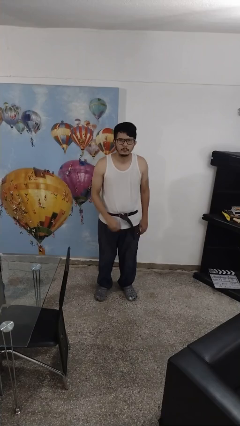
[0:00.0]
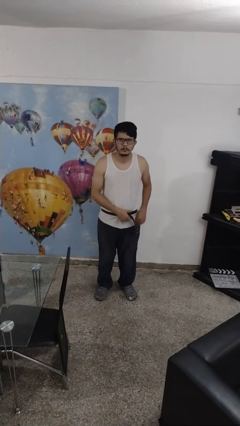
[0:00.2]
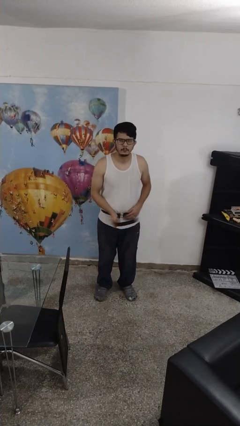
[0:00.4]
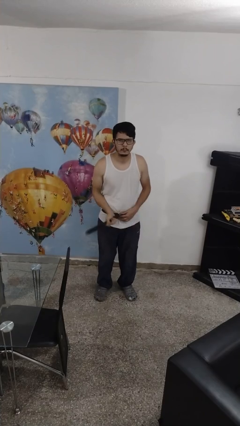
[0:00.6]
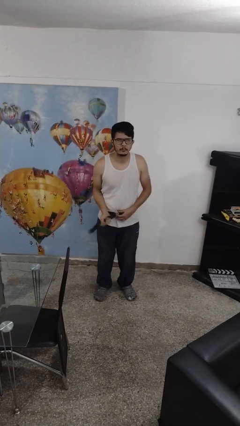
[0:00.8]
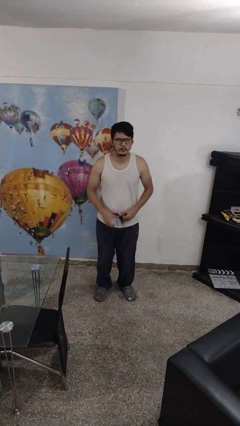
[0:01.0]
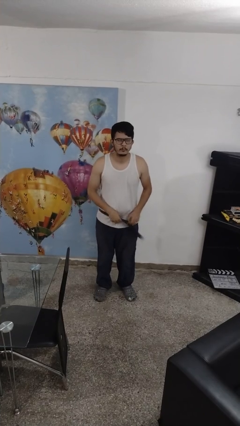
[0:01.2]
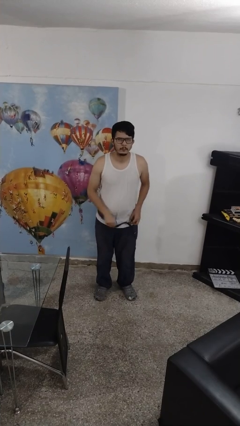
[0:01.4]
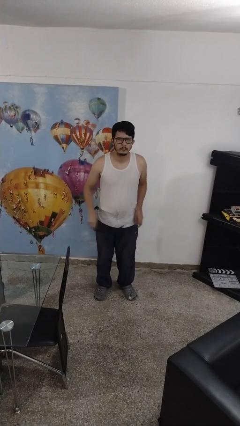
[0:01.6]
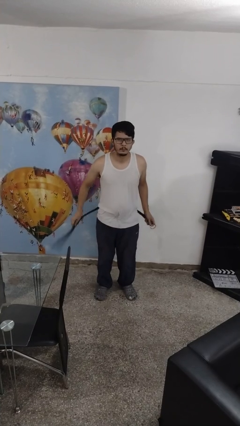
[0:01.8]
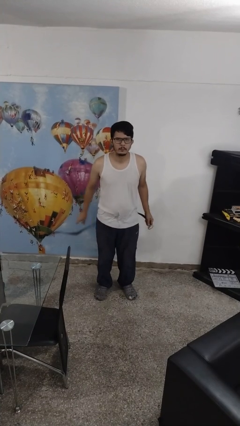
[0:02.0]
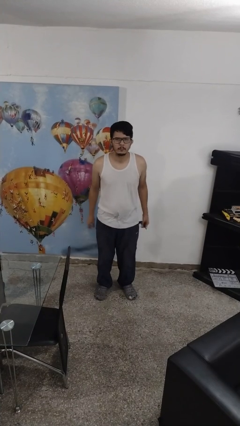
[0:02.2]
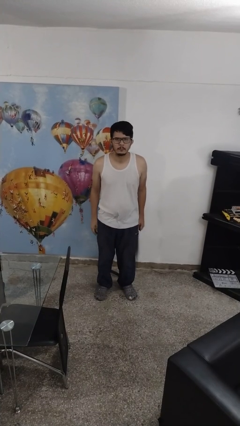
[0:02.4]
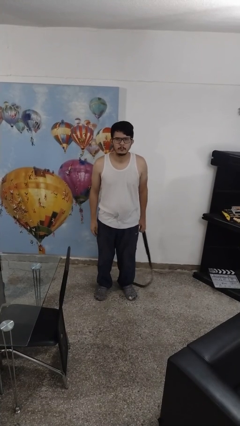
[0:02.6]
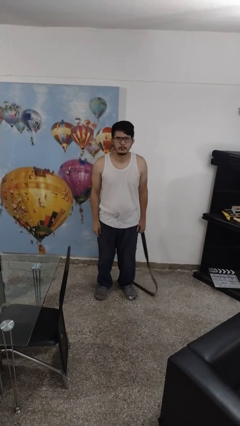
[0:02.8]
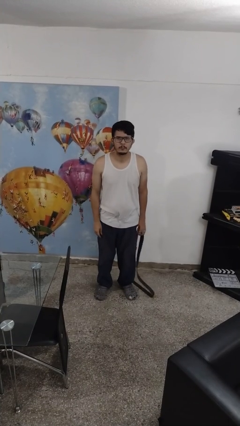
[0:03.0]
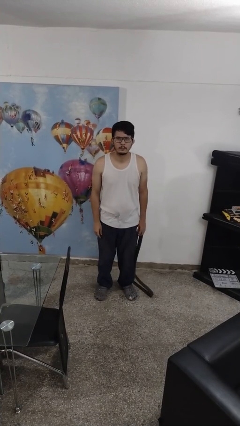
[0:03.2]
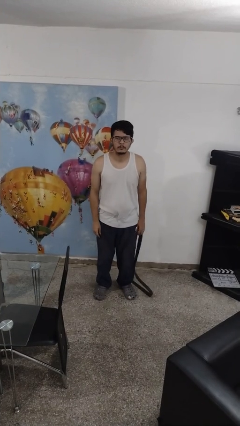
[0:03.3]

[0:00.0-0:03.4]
person takes off belt

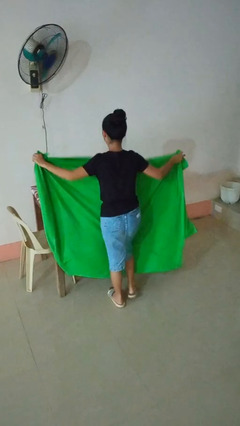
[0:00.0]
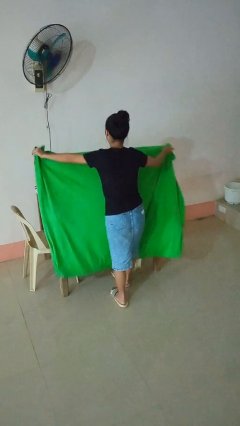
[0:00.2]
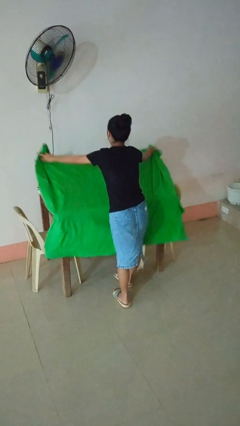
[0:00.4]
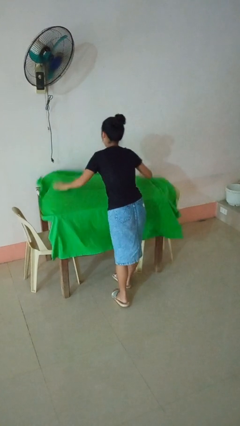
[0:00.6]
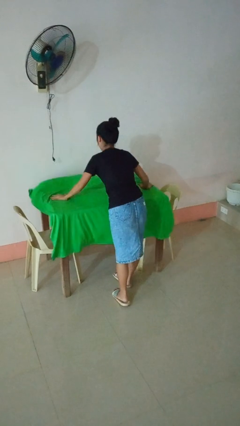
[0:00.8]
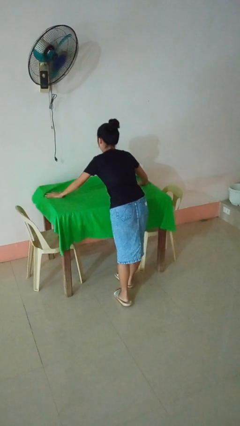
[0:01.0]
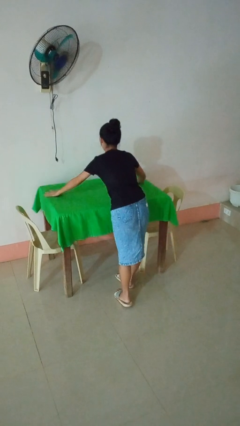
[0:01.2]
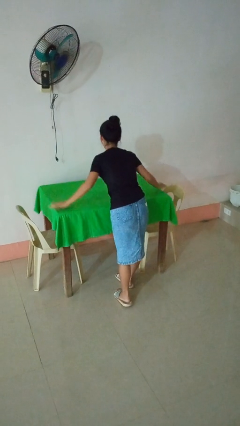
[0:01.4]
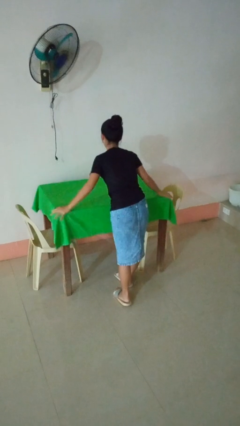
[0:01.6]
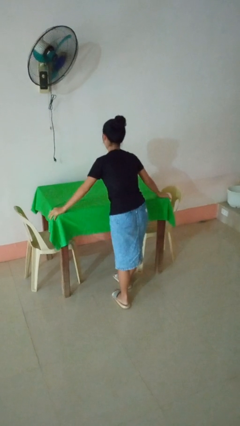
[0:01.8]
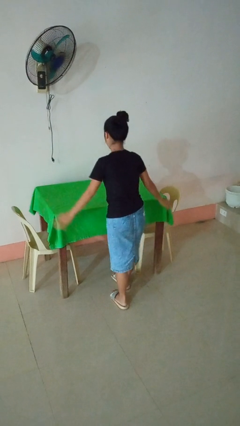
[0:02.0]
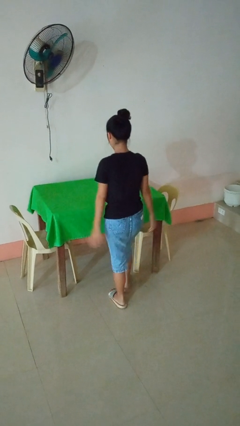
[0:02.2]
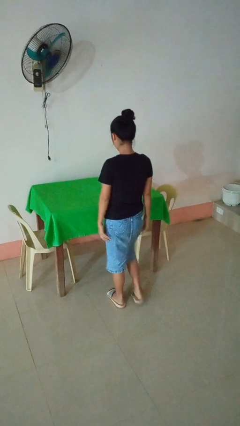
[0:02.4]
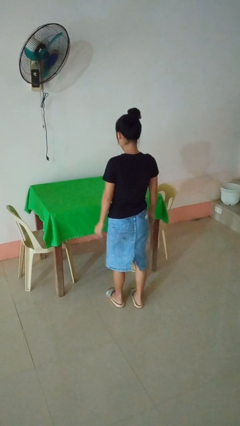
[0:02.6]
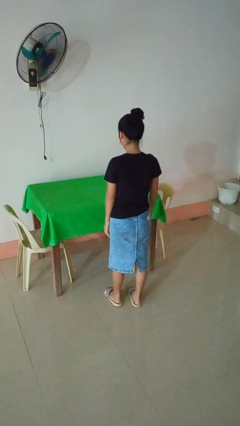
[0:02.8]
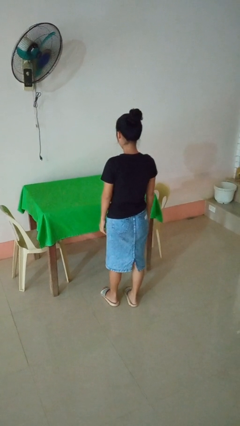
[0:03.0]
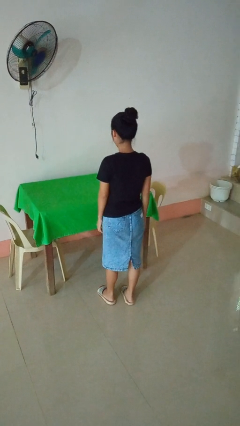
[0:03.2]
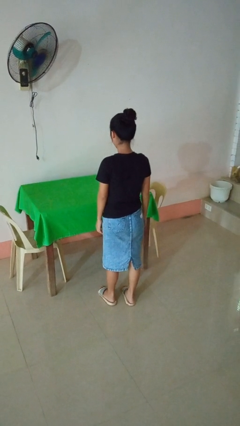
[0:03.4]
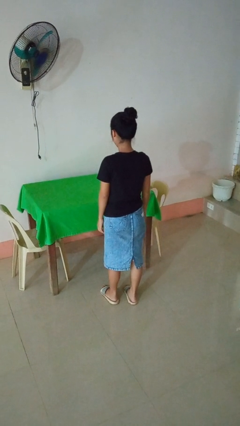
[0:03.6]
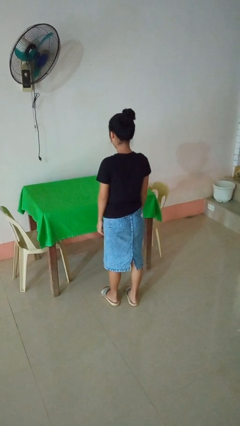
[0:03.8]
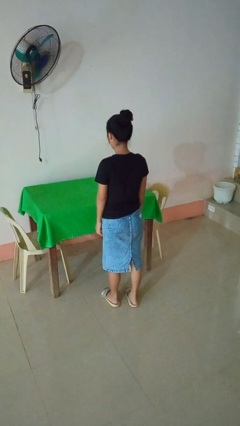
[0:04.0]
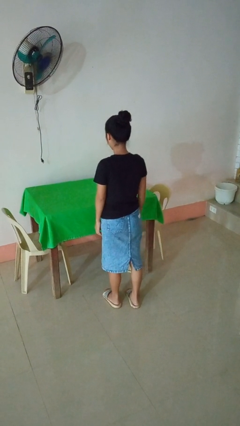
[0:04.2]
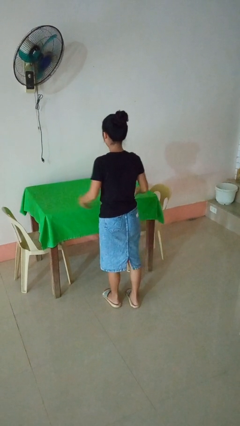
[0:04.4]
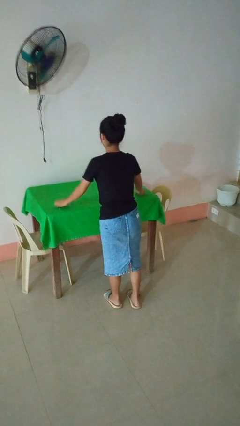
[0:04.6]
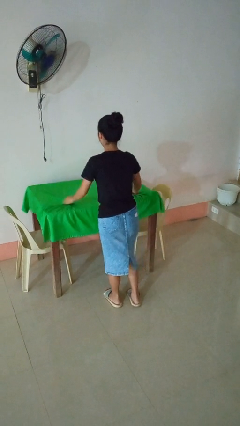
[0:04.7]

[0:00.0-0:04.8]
person spreads tablecloth

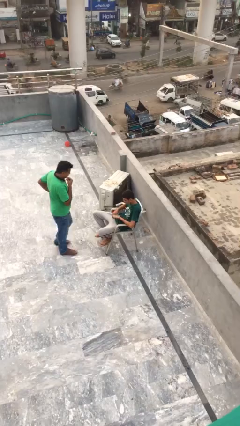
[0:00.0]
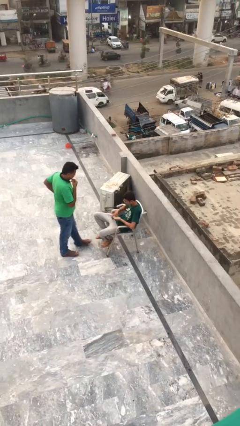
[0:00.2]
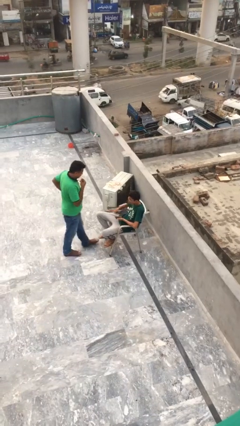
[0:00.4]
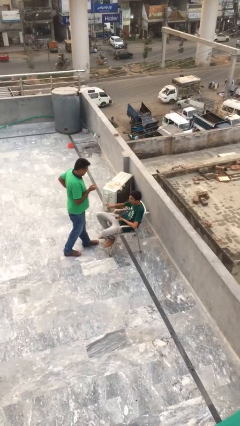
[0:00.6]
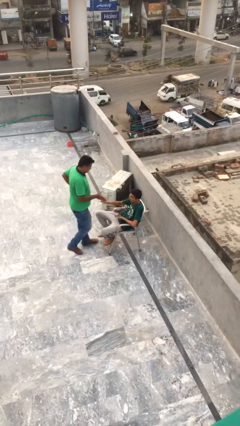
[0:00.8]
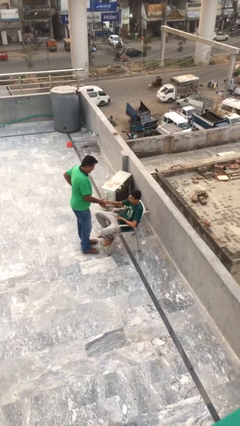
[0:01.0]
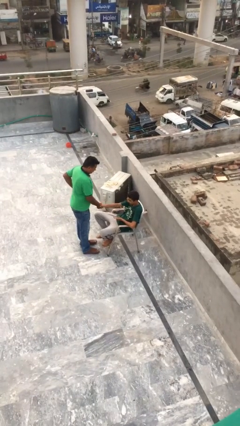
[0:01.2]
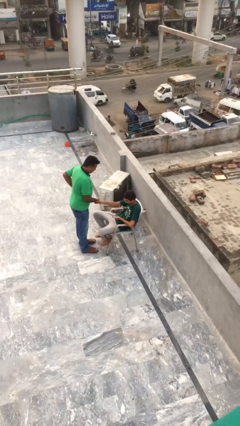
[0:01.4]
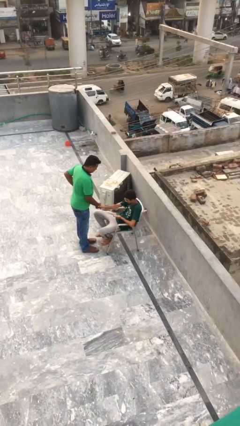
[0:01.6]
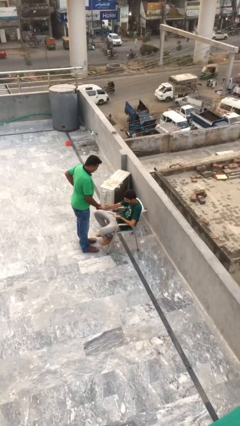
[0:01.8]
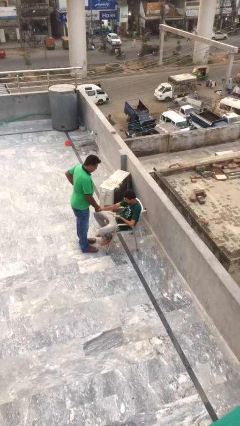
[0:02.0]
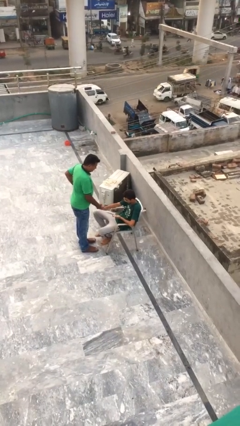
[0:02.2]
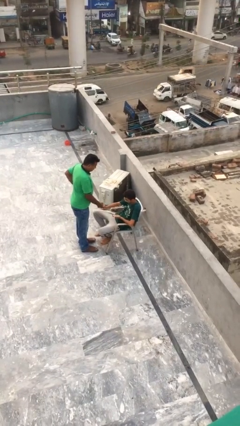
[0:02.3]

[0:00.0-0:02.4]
person shakes hand

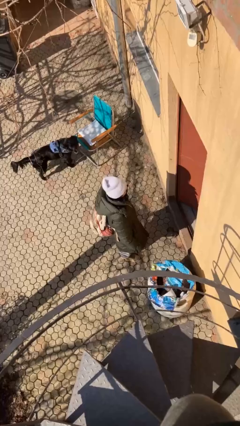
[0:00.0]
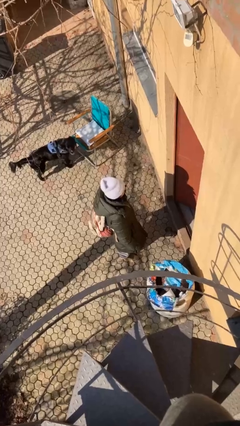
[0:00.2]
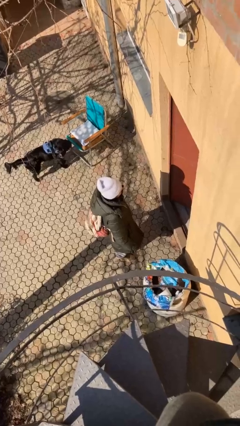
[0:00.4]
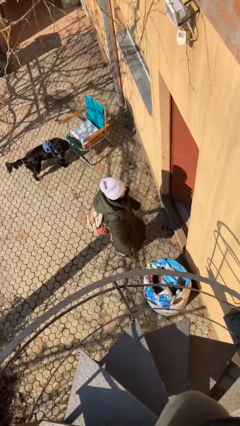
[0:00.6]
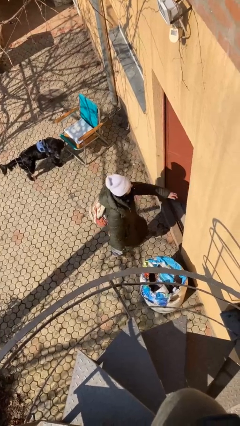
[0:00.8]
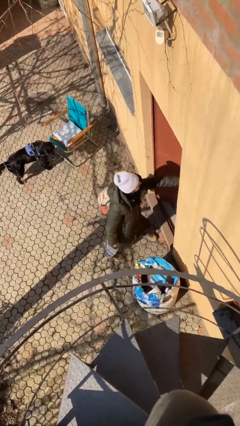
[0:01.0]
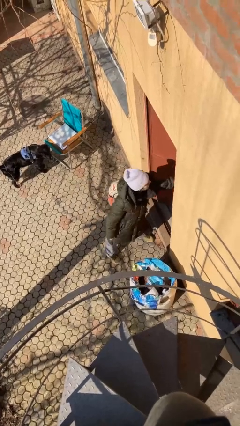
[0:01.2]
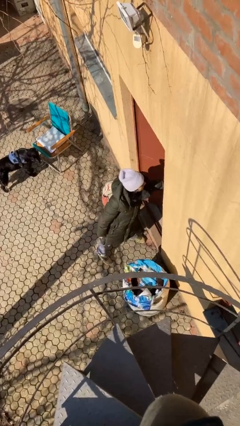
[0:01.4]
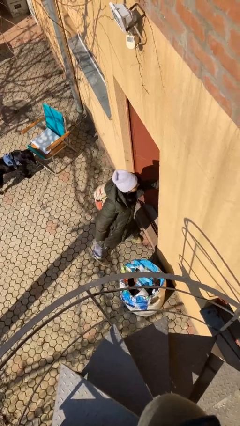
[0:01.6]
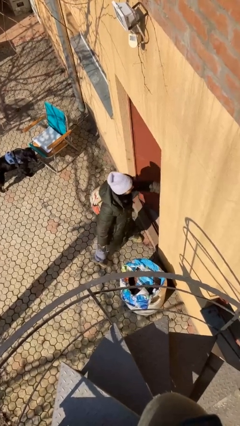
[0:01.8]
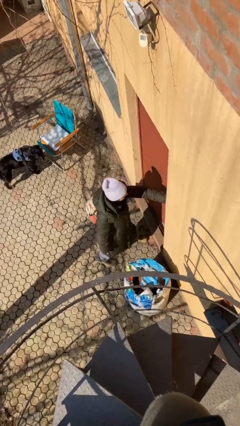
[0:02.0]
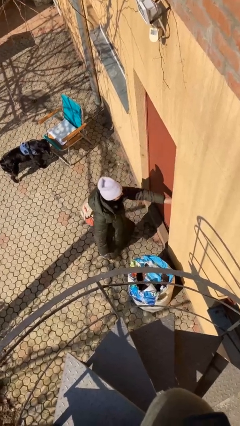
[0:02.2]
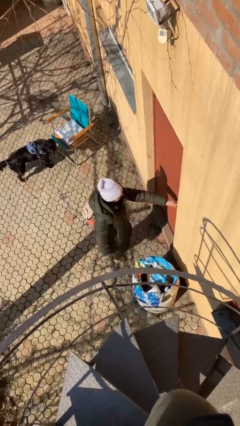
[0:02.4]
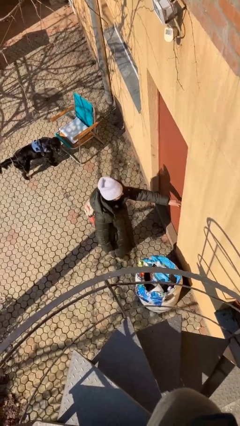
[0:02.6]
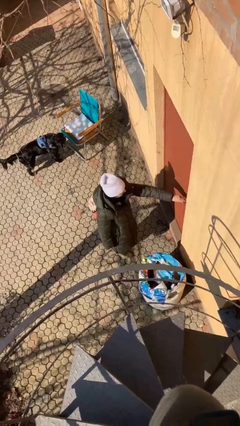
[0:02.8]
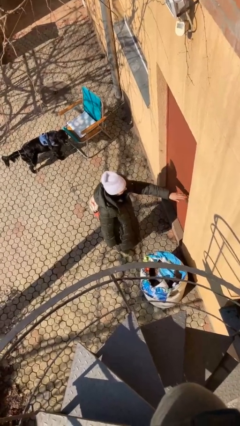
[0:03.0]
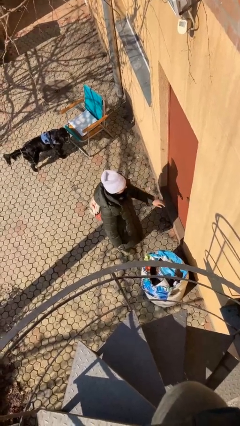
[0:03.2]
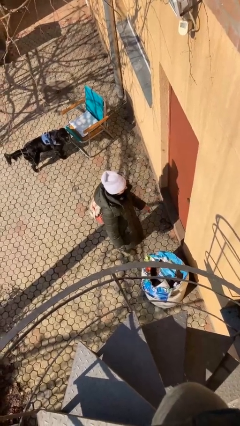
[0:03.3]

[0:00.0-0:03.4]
person closes facility door

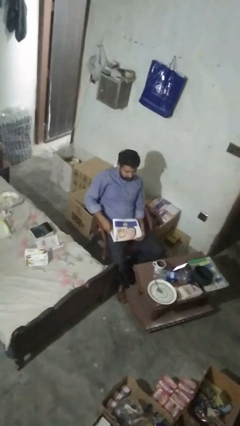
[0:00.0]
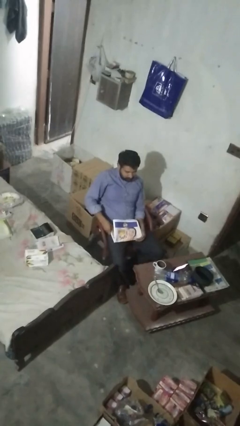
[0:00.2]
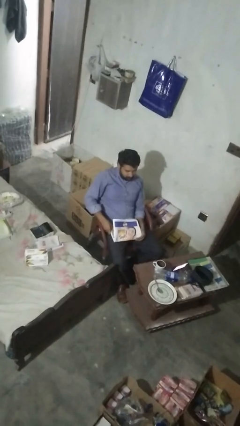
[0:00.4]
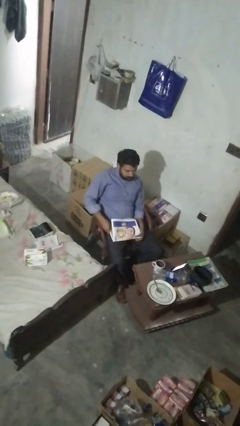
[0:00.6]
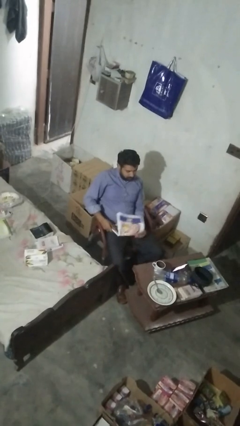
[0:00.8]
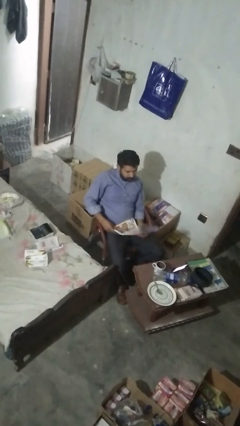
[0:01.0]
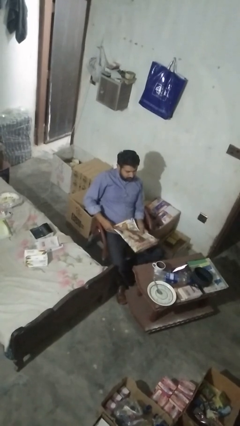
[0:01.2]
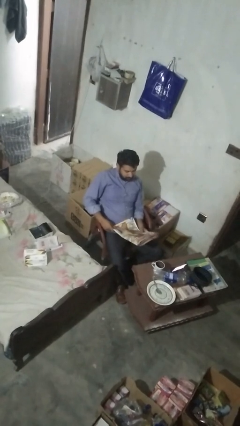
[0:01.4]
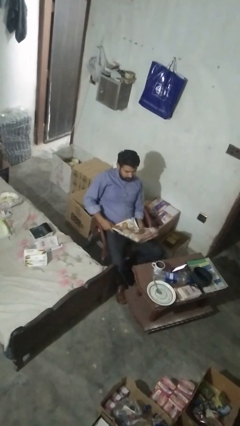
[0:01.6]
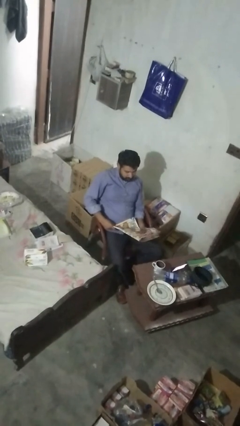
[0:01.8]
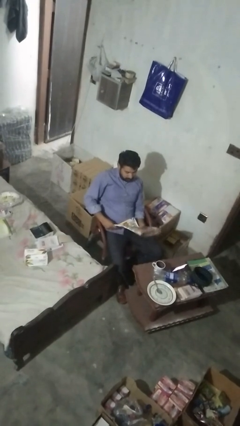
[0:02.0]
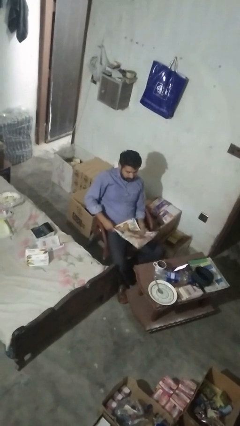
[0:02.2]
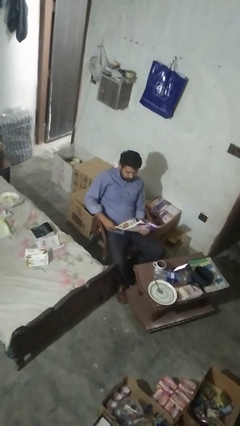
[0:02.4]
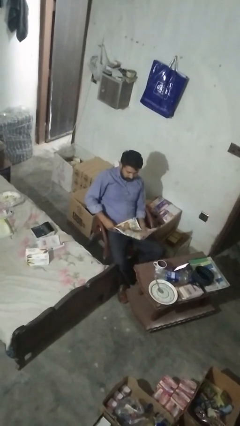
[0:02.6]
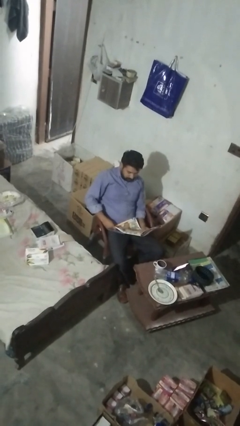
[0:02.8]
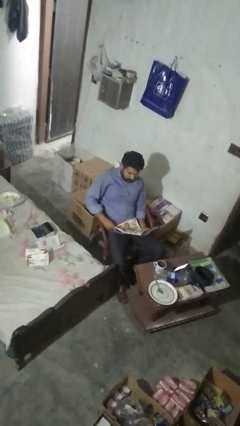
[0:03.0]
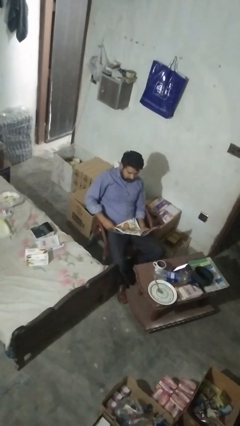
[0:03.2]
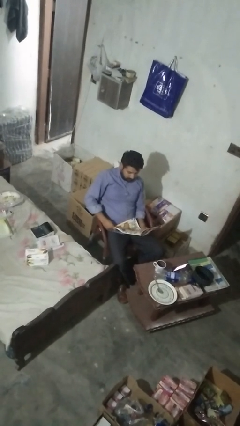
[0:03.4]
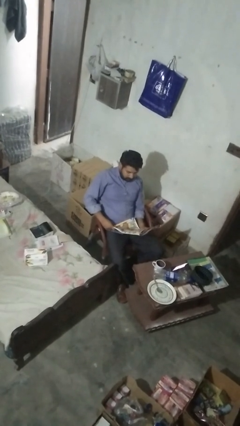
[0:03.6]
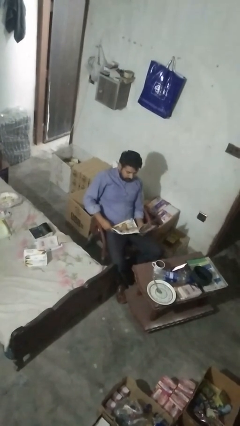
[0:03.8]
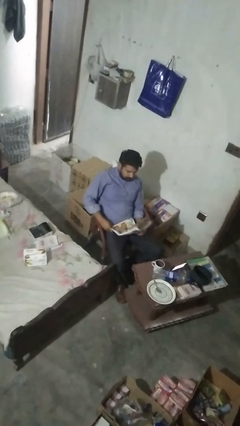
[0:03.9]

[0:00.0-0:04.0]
person reads magazine
